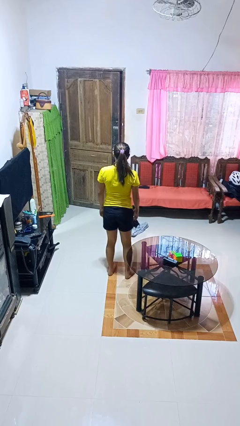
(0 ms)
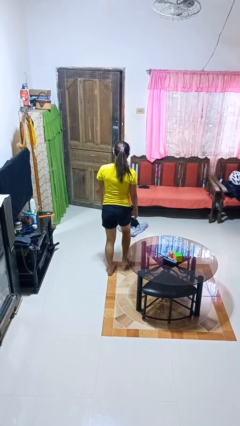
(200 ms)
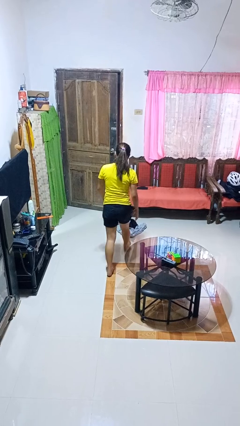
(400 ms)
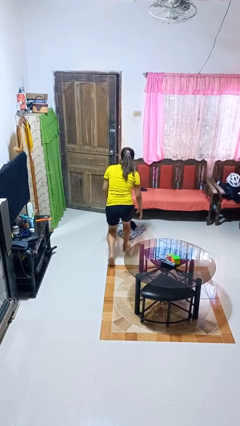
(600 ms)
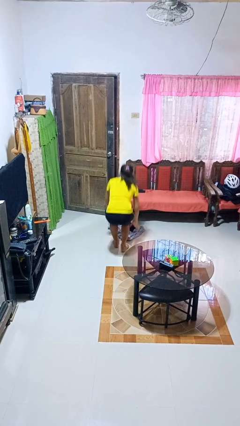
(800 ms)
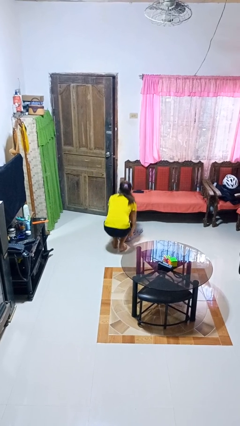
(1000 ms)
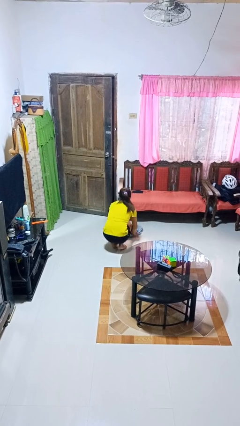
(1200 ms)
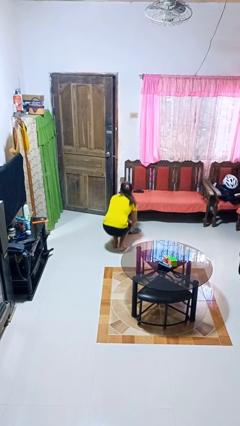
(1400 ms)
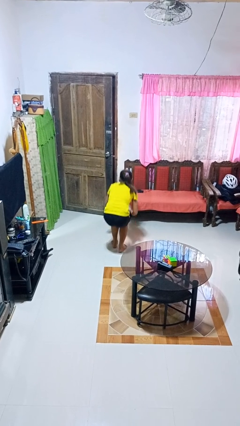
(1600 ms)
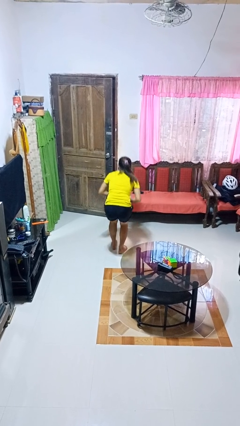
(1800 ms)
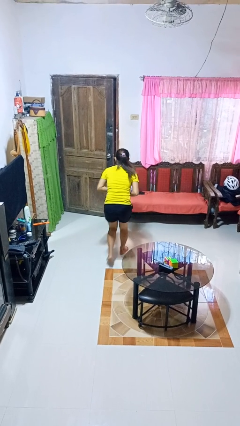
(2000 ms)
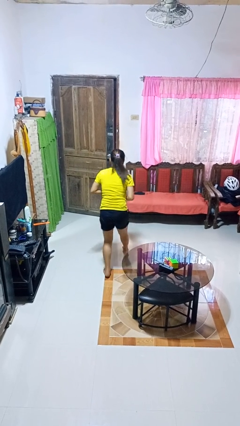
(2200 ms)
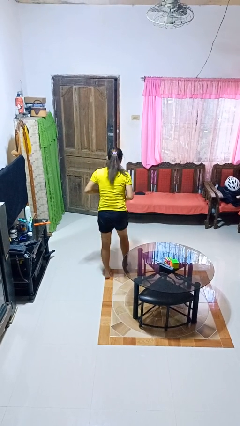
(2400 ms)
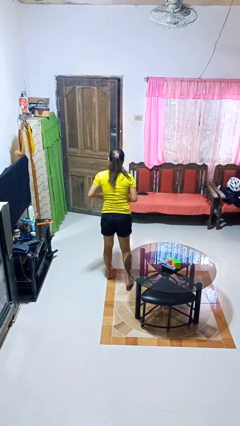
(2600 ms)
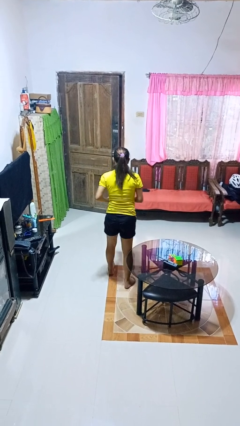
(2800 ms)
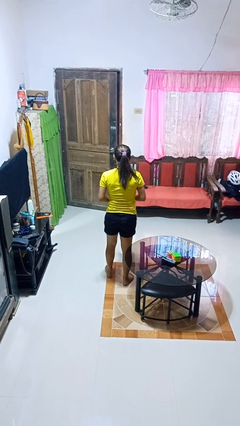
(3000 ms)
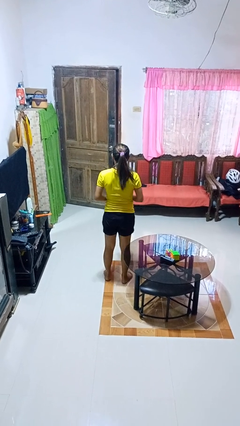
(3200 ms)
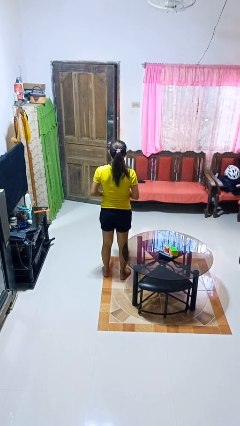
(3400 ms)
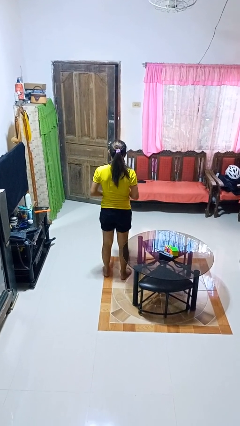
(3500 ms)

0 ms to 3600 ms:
person picks up object from floor

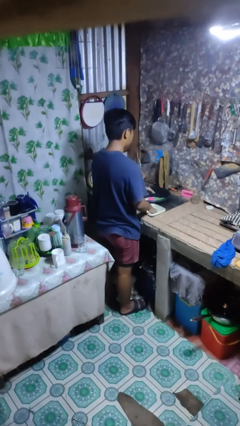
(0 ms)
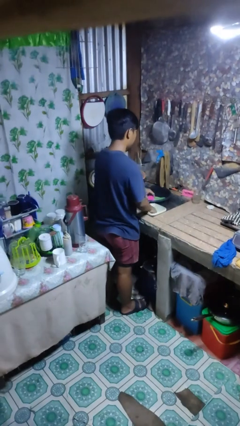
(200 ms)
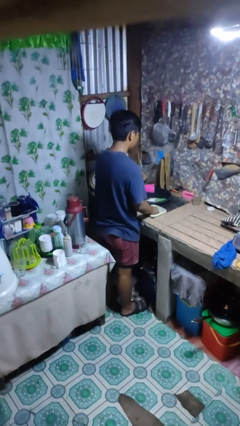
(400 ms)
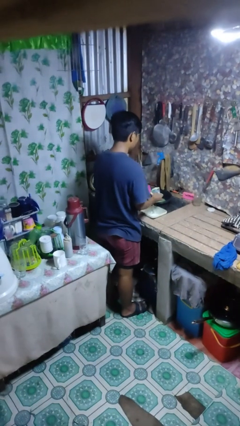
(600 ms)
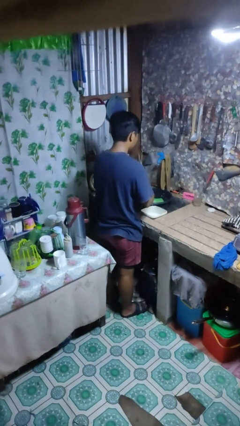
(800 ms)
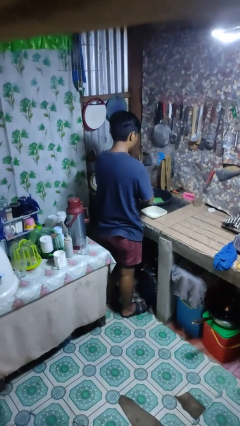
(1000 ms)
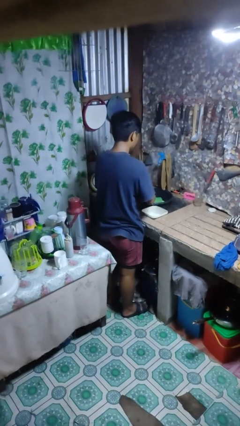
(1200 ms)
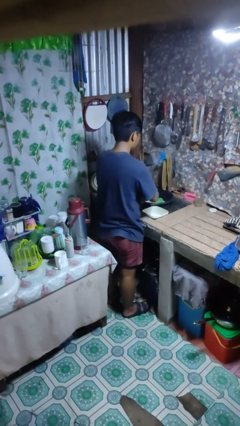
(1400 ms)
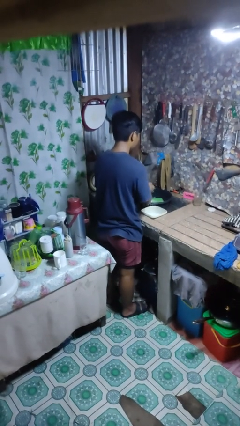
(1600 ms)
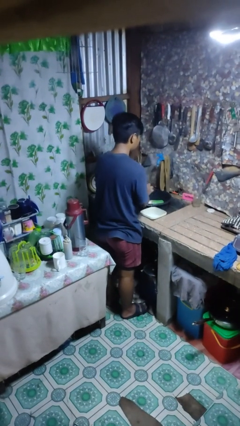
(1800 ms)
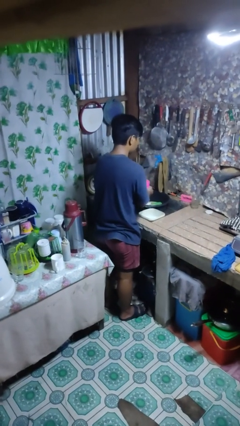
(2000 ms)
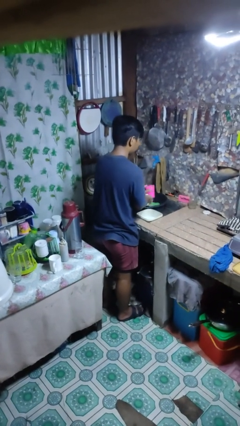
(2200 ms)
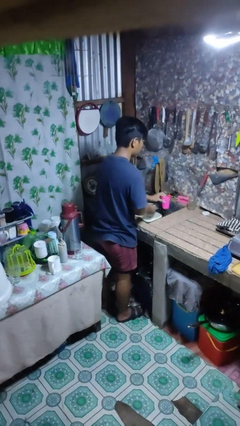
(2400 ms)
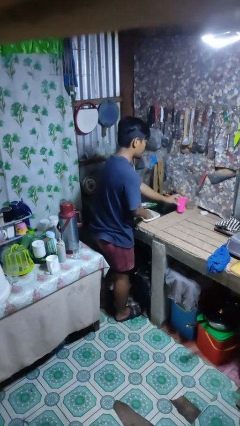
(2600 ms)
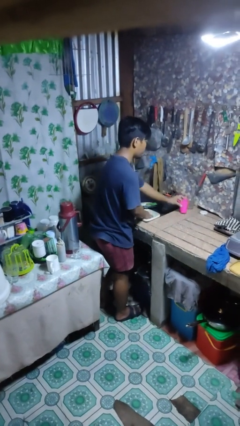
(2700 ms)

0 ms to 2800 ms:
person washes dish

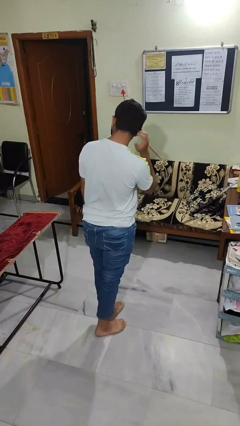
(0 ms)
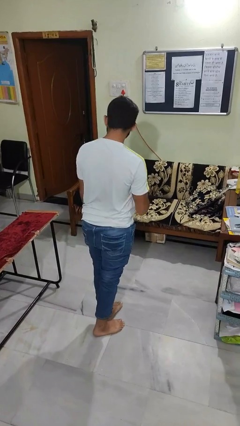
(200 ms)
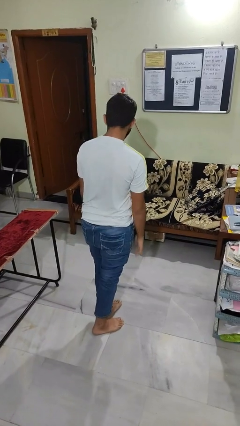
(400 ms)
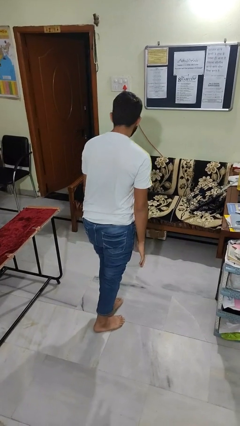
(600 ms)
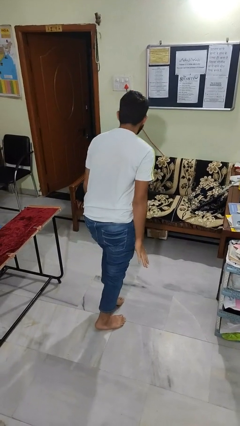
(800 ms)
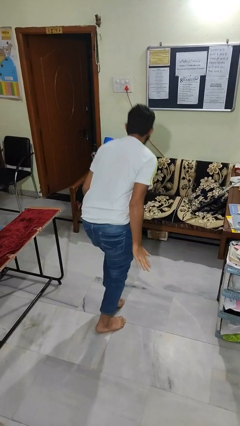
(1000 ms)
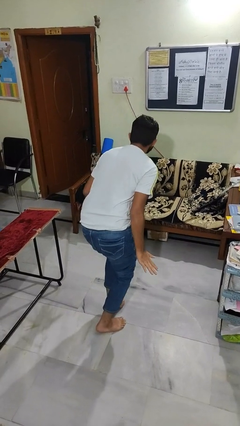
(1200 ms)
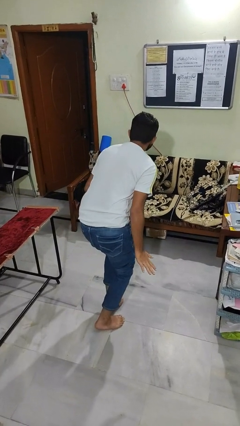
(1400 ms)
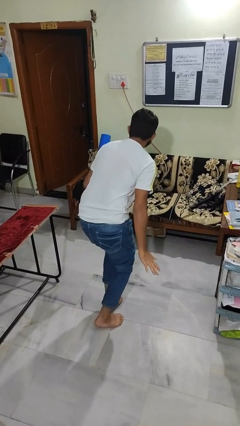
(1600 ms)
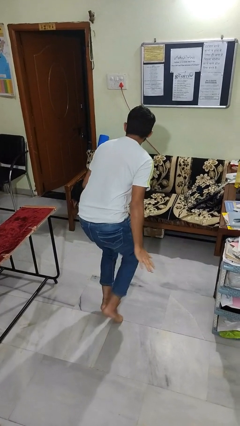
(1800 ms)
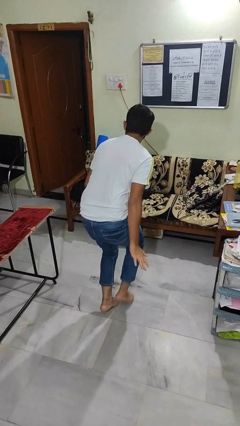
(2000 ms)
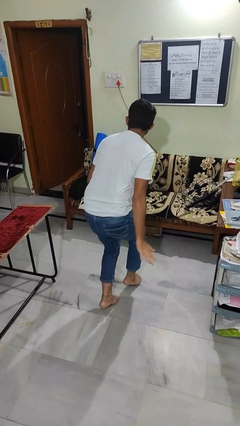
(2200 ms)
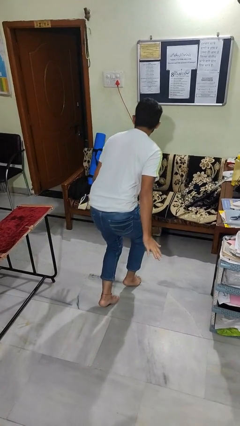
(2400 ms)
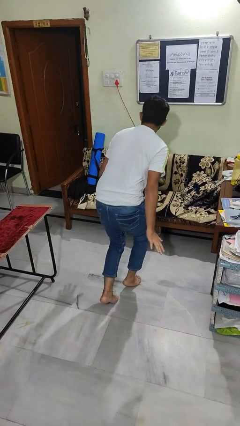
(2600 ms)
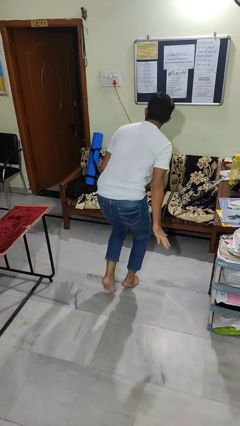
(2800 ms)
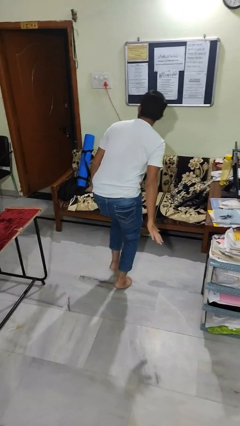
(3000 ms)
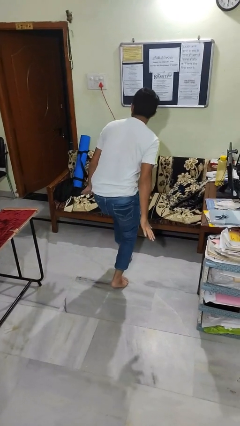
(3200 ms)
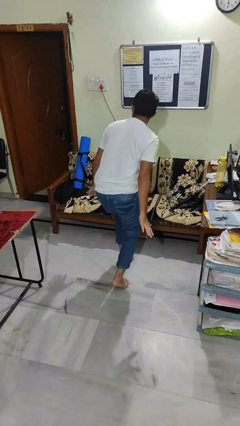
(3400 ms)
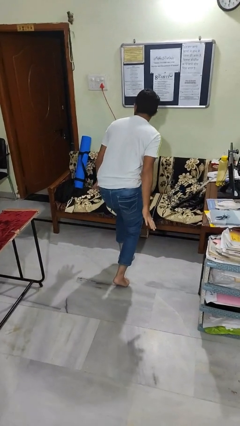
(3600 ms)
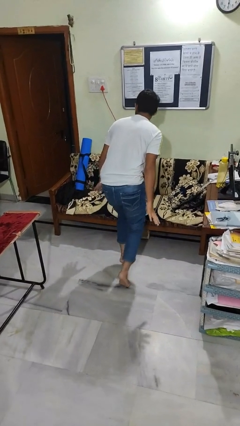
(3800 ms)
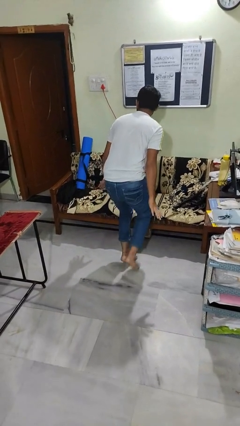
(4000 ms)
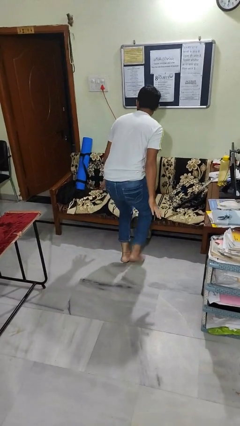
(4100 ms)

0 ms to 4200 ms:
person walks tiptoe

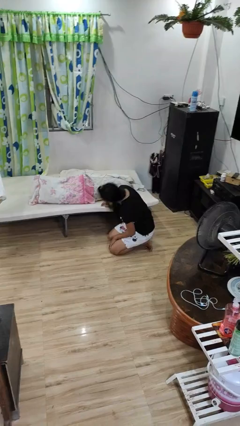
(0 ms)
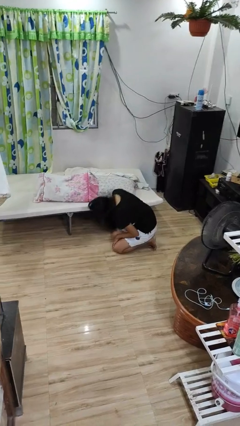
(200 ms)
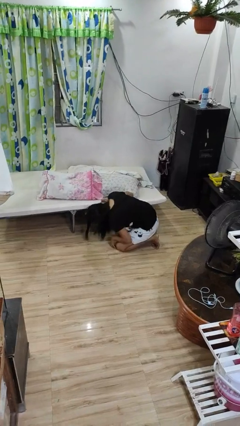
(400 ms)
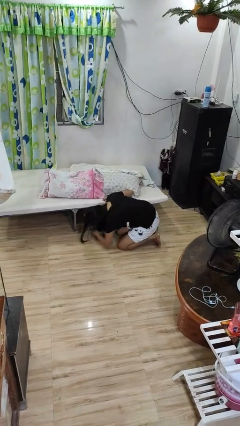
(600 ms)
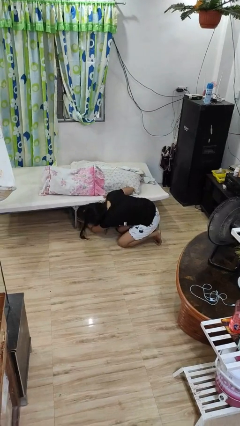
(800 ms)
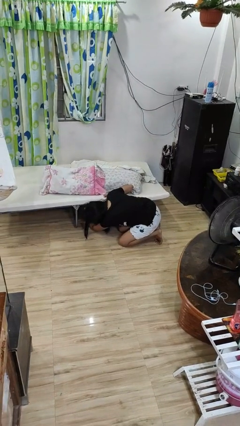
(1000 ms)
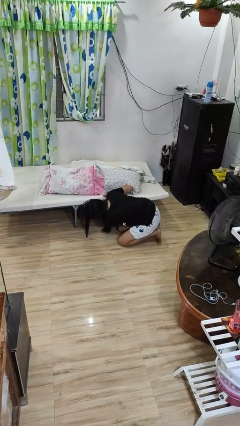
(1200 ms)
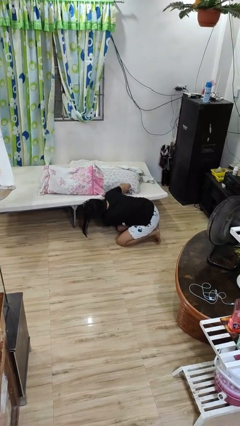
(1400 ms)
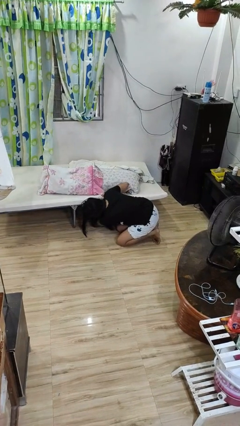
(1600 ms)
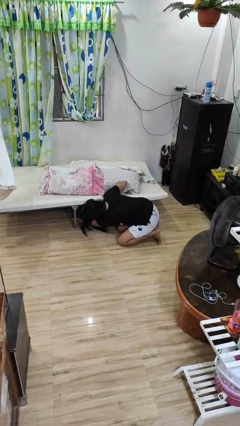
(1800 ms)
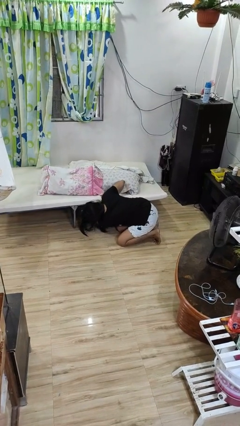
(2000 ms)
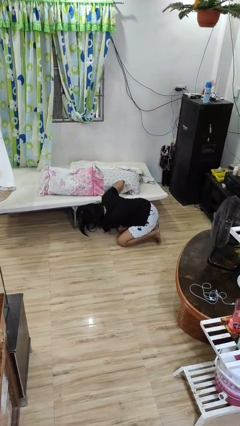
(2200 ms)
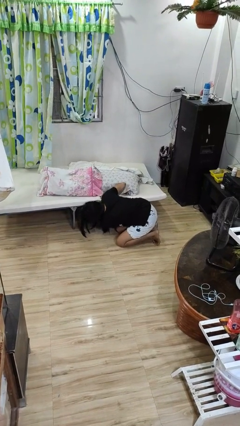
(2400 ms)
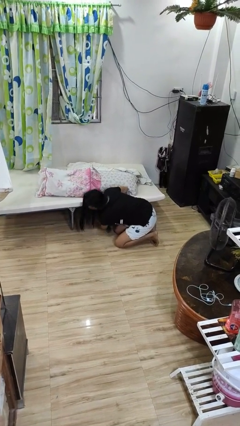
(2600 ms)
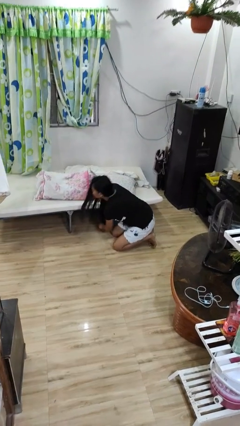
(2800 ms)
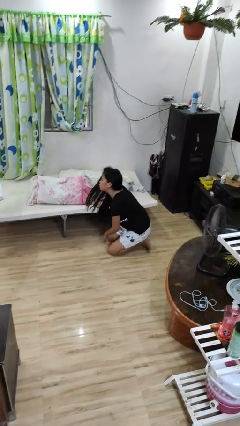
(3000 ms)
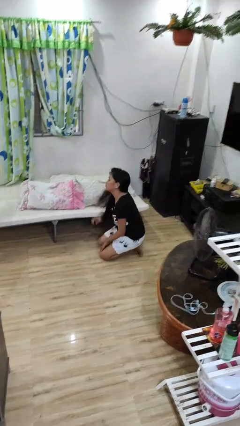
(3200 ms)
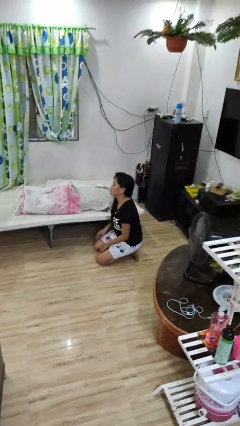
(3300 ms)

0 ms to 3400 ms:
person searches under bed

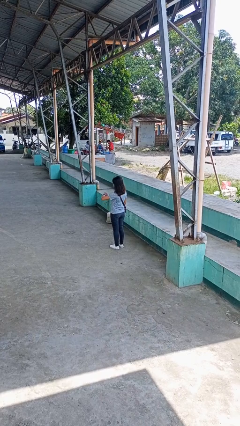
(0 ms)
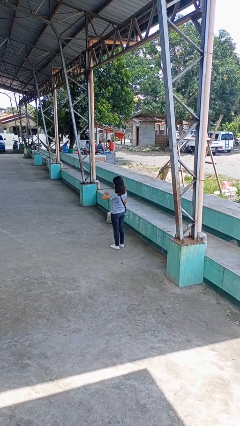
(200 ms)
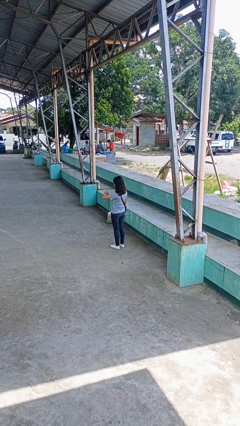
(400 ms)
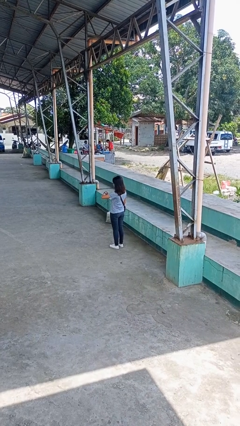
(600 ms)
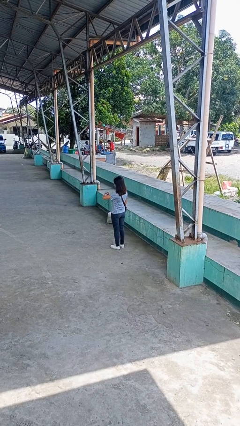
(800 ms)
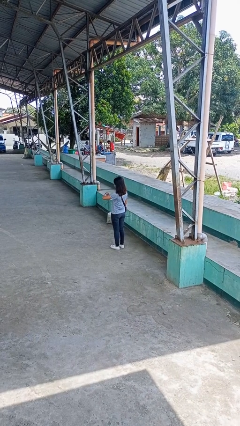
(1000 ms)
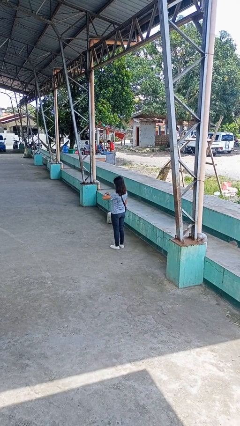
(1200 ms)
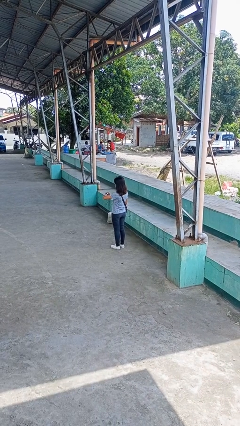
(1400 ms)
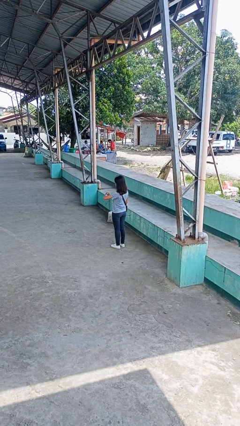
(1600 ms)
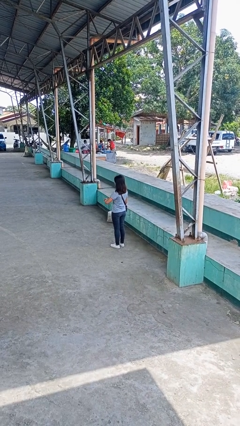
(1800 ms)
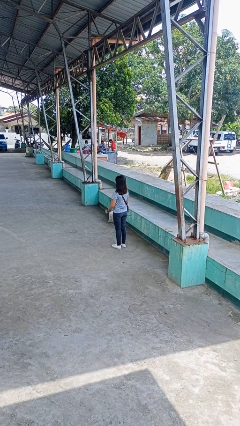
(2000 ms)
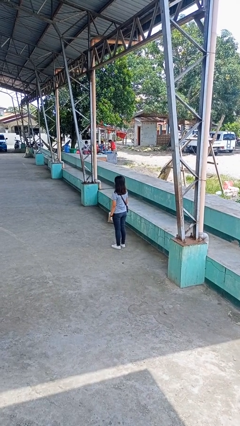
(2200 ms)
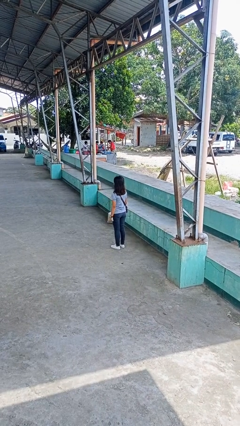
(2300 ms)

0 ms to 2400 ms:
person looks at wristwatch

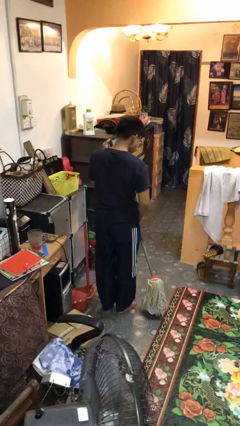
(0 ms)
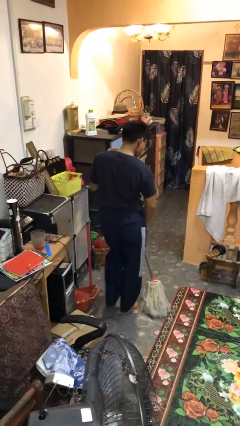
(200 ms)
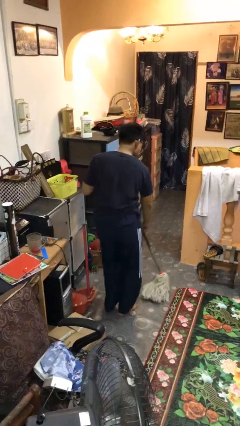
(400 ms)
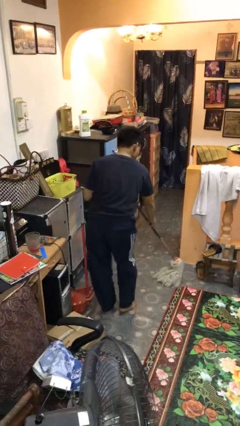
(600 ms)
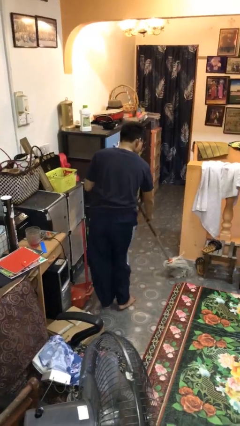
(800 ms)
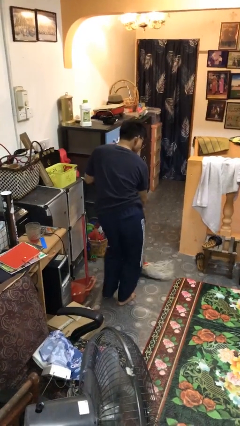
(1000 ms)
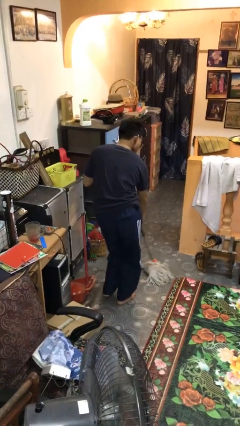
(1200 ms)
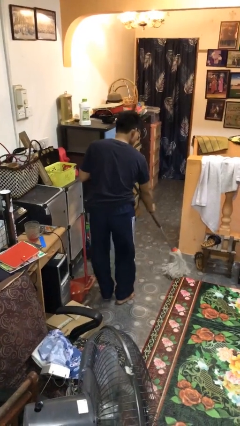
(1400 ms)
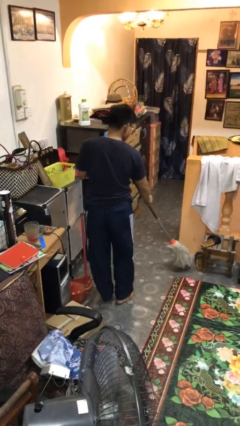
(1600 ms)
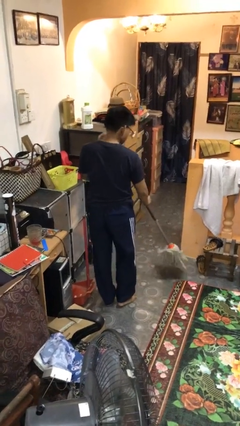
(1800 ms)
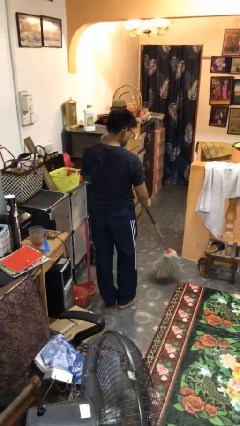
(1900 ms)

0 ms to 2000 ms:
person mops
